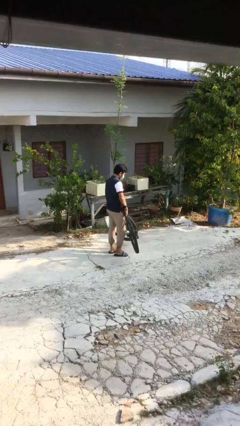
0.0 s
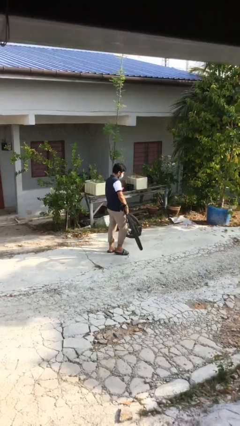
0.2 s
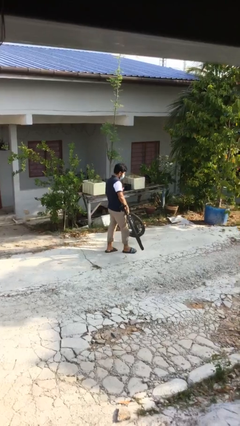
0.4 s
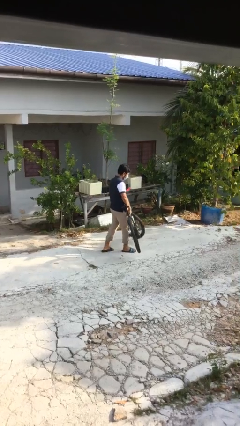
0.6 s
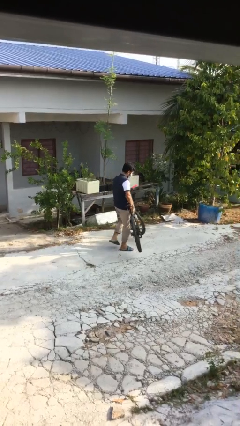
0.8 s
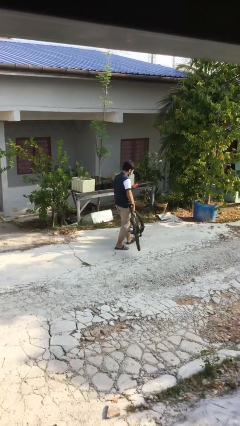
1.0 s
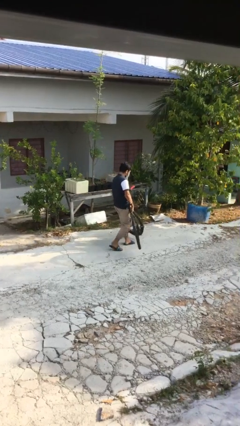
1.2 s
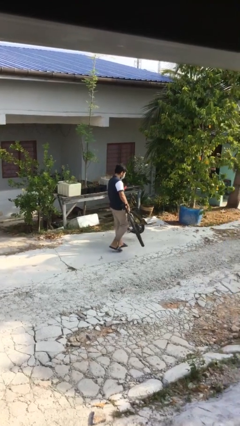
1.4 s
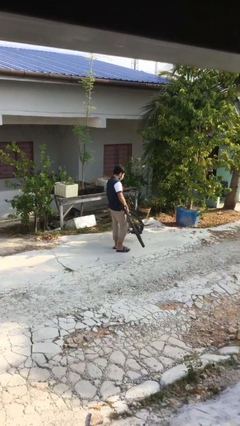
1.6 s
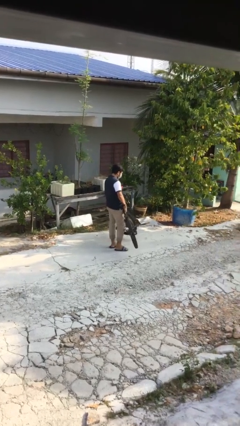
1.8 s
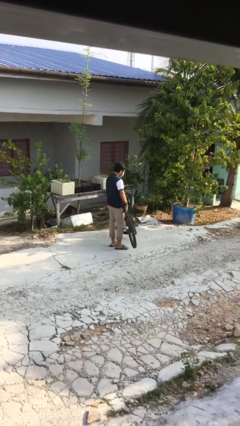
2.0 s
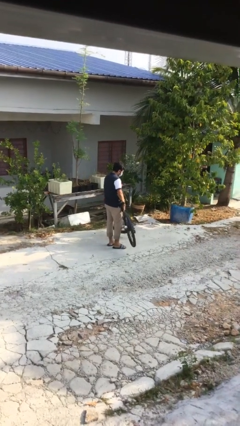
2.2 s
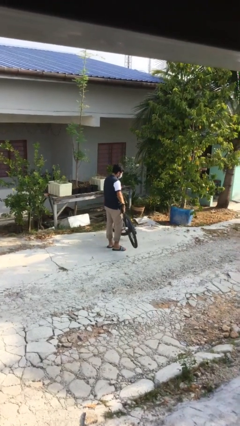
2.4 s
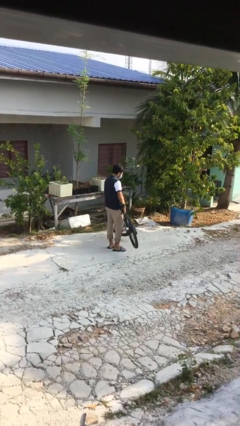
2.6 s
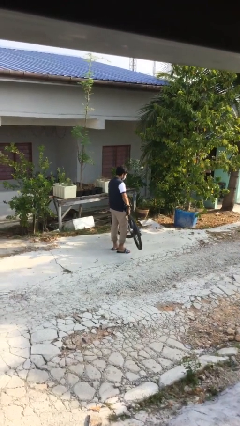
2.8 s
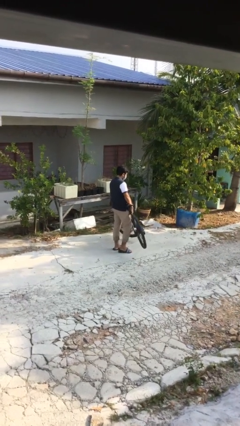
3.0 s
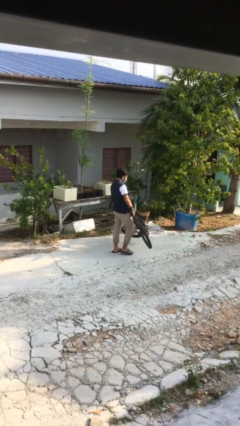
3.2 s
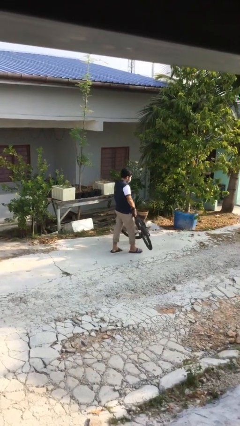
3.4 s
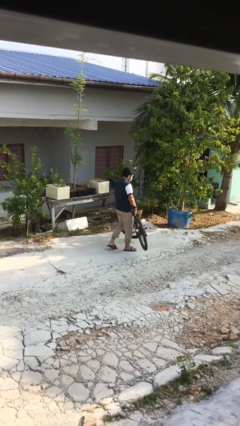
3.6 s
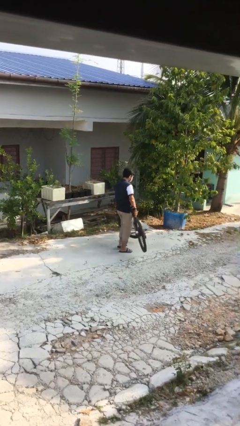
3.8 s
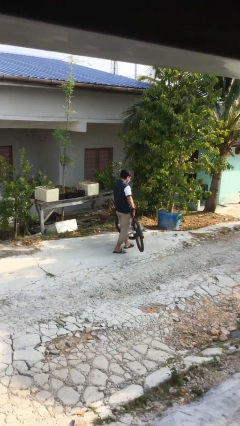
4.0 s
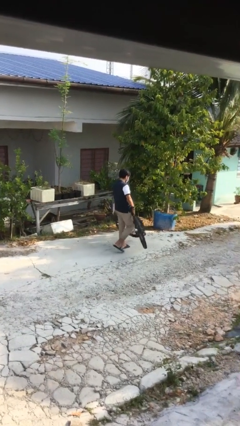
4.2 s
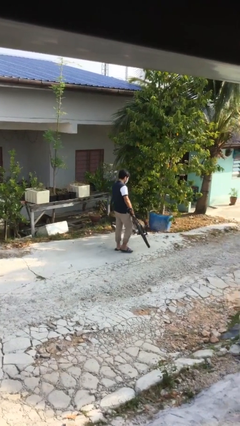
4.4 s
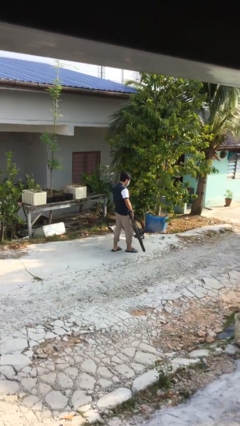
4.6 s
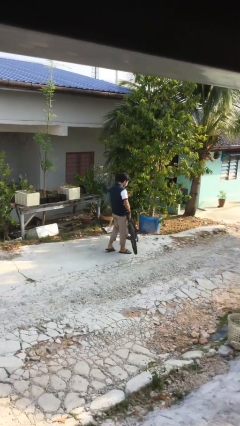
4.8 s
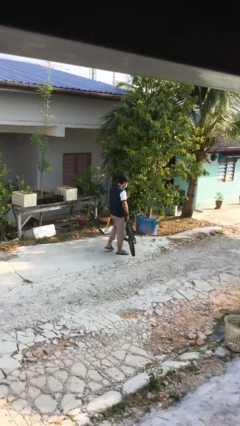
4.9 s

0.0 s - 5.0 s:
person carries bicycle

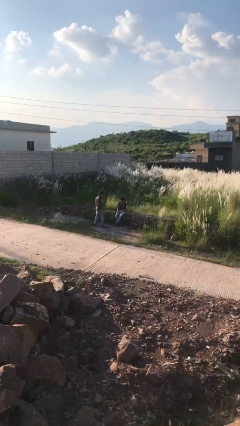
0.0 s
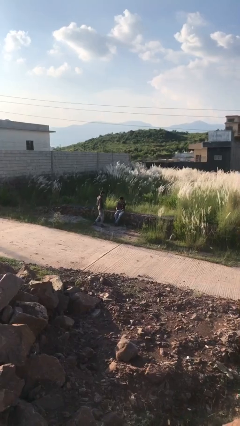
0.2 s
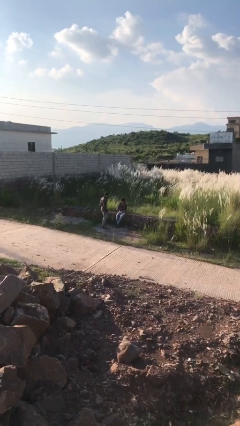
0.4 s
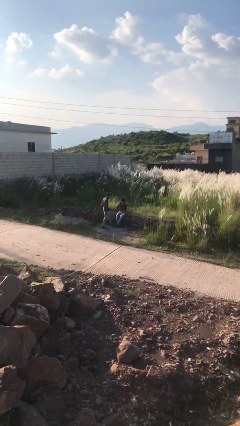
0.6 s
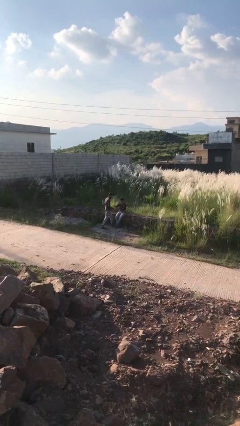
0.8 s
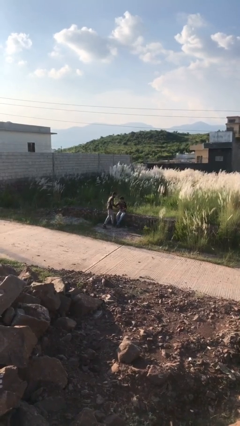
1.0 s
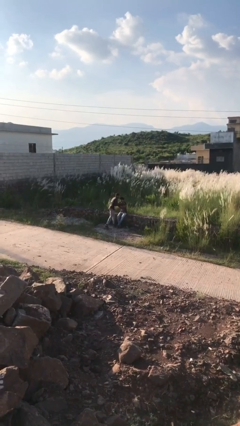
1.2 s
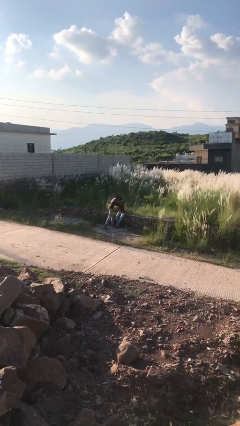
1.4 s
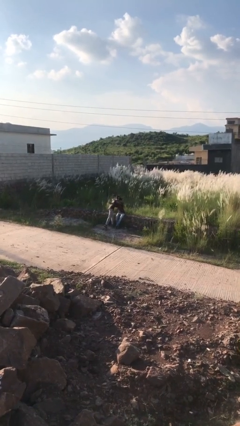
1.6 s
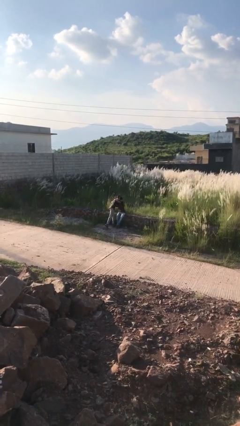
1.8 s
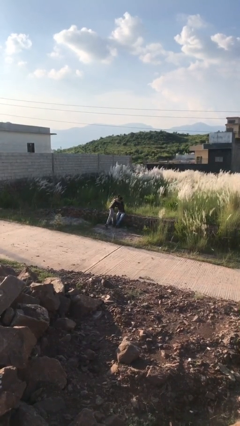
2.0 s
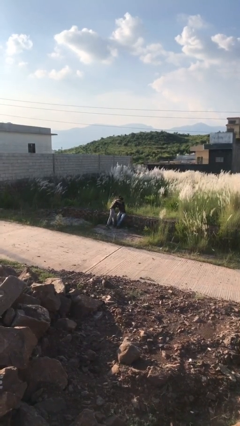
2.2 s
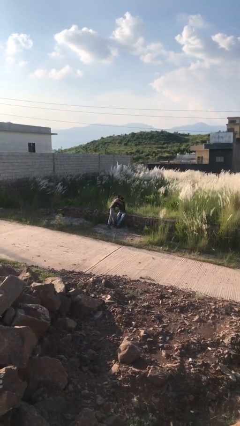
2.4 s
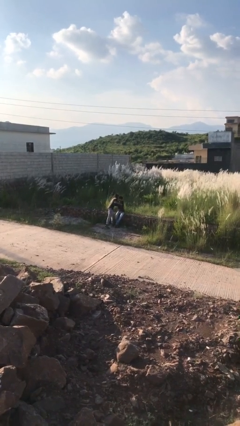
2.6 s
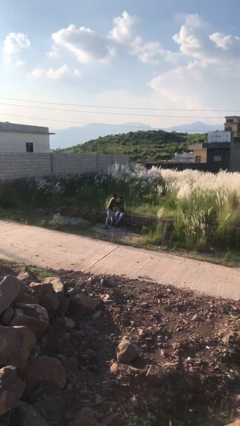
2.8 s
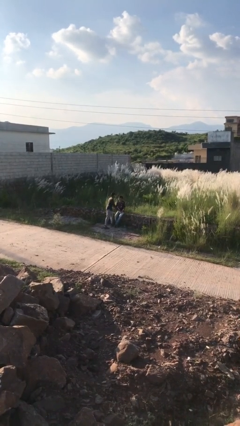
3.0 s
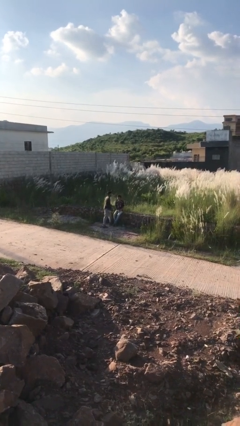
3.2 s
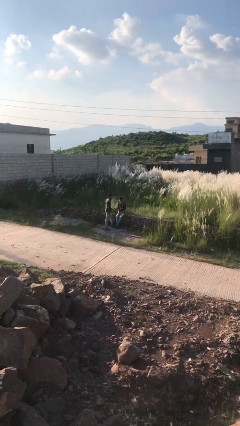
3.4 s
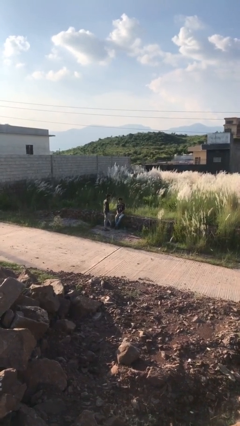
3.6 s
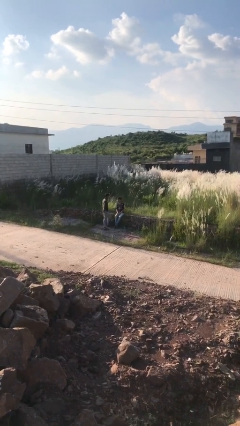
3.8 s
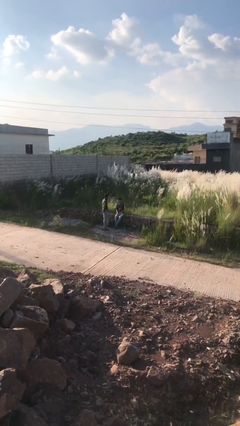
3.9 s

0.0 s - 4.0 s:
person embraces person

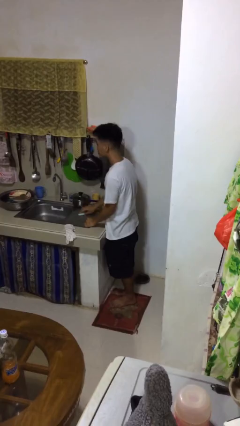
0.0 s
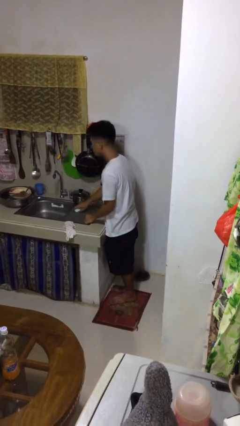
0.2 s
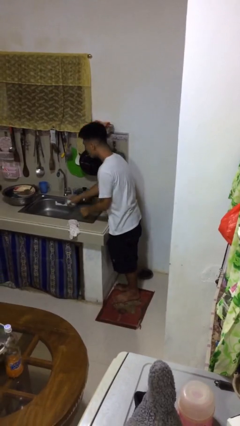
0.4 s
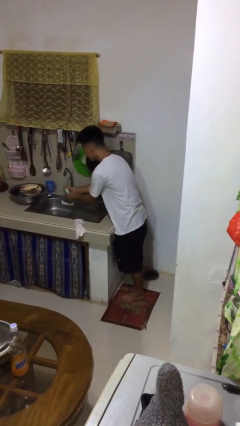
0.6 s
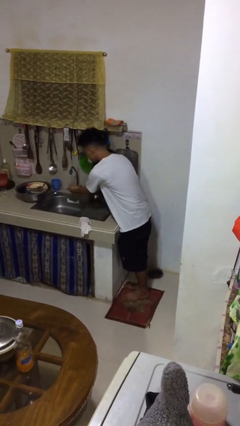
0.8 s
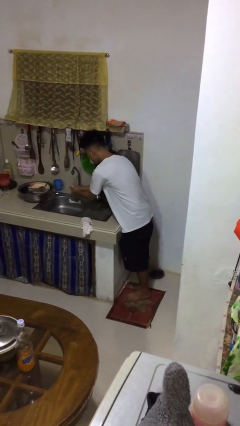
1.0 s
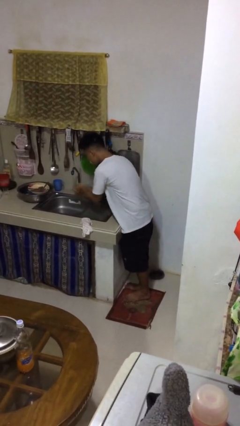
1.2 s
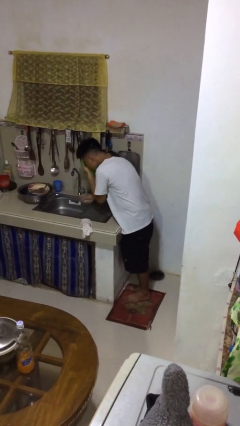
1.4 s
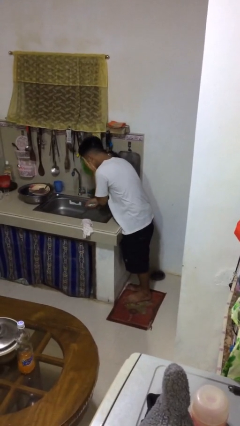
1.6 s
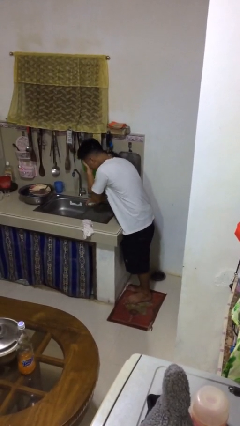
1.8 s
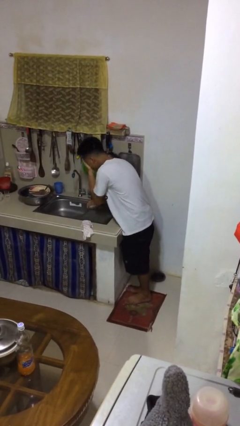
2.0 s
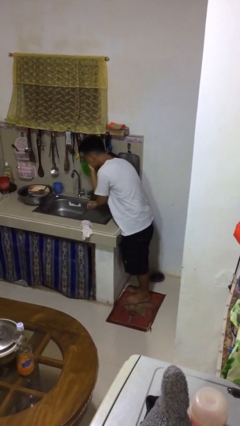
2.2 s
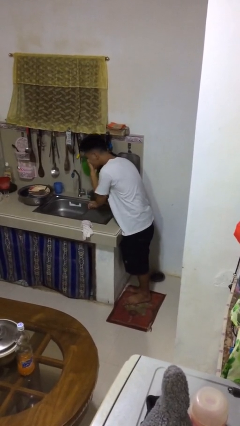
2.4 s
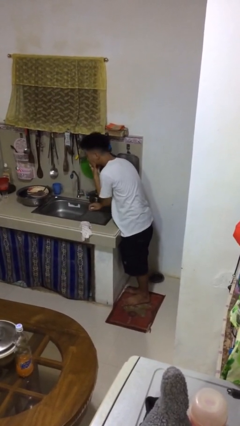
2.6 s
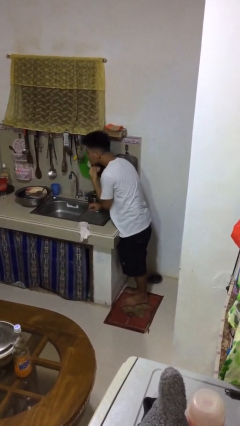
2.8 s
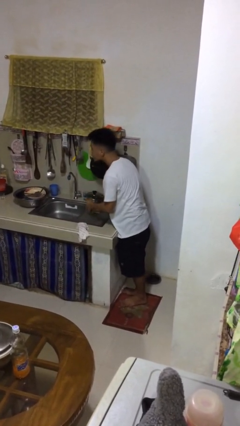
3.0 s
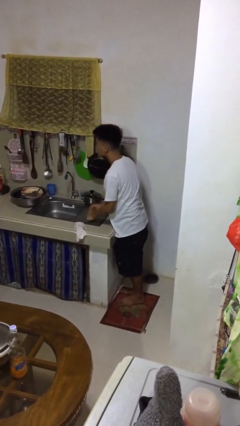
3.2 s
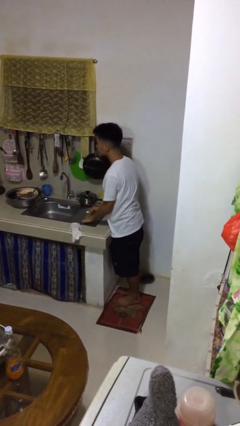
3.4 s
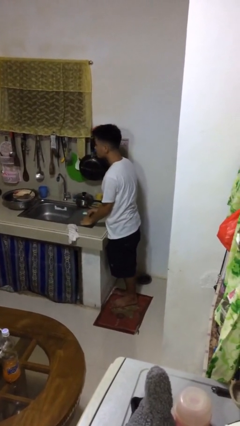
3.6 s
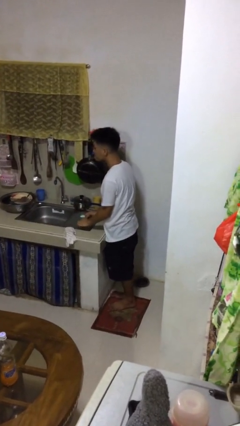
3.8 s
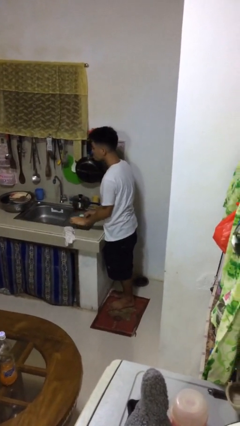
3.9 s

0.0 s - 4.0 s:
person washes face

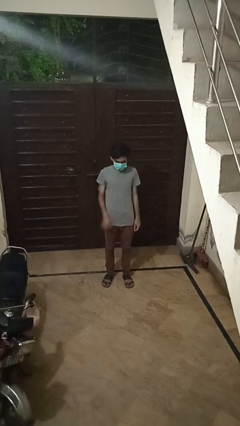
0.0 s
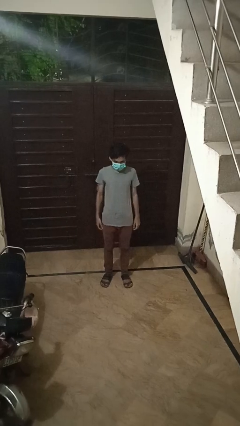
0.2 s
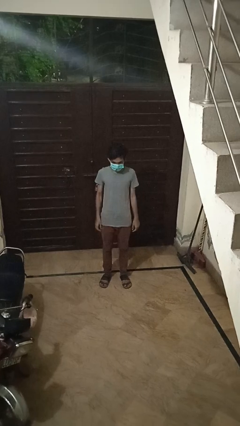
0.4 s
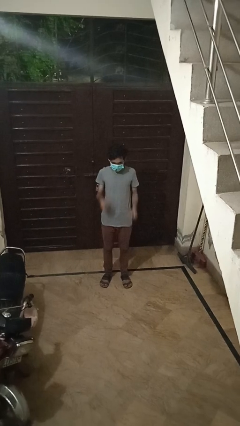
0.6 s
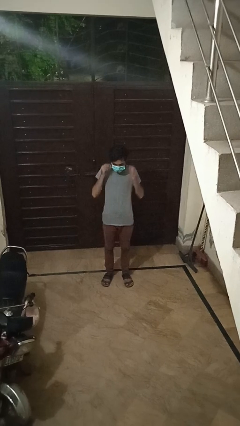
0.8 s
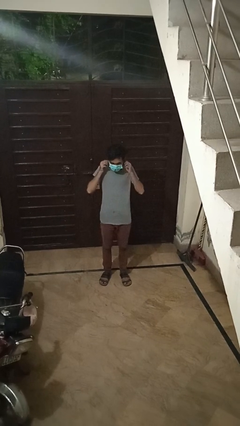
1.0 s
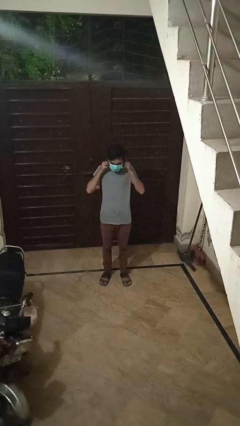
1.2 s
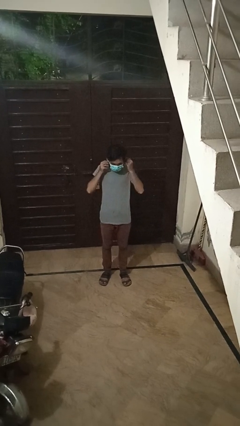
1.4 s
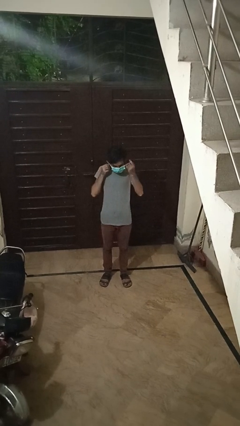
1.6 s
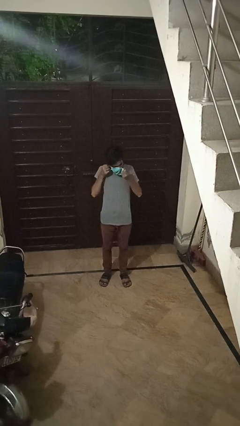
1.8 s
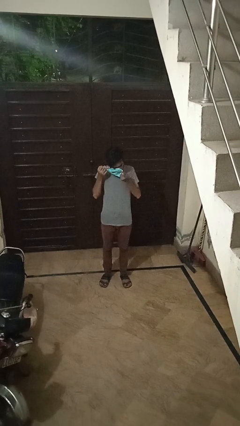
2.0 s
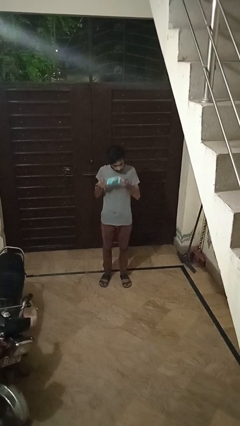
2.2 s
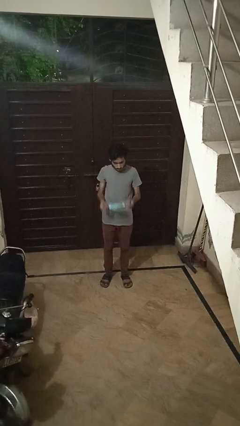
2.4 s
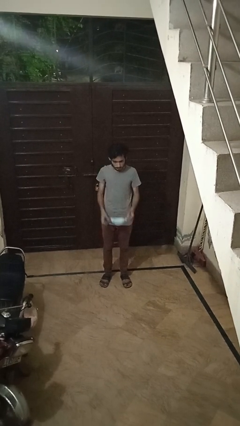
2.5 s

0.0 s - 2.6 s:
person takes off facemask

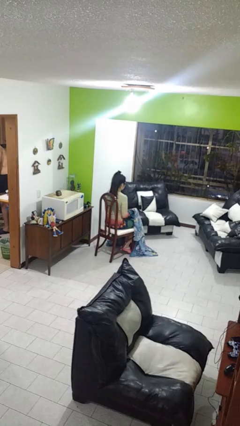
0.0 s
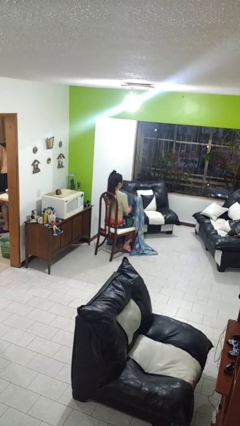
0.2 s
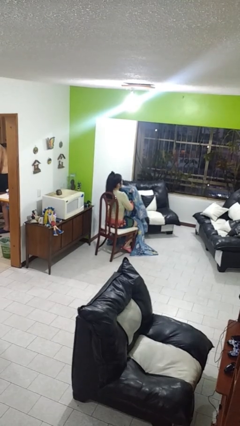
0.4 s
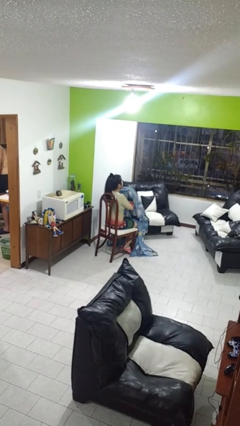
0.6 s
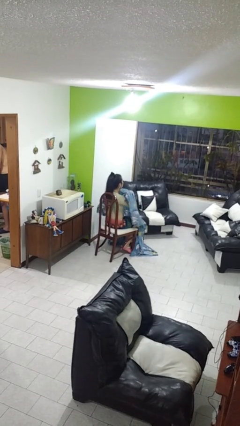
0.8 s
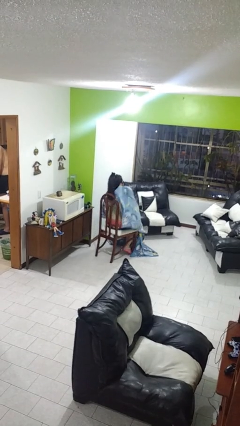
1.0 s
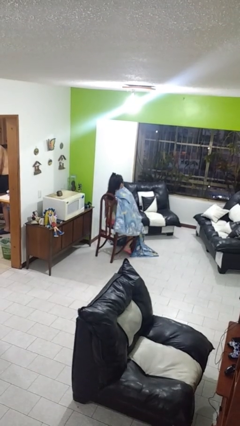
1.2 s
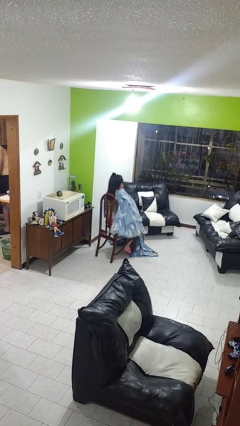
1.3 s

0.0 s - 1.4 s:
person covers with blanket

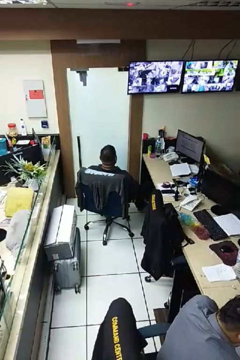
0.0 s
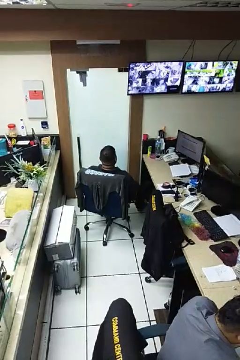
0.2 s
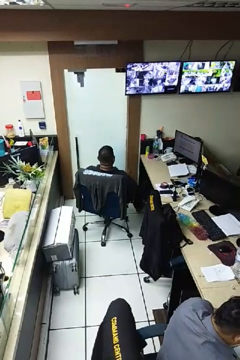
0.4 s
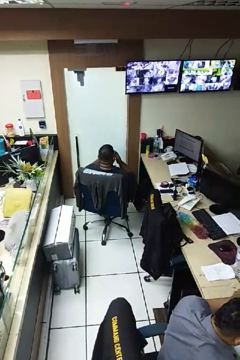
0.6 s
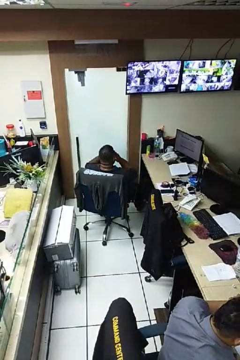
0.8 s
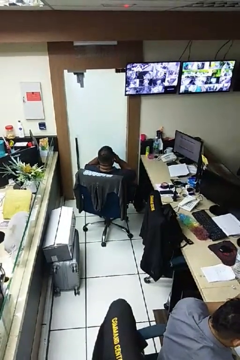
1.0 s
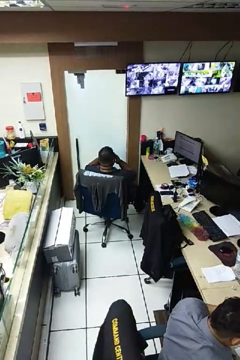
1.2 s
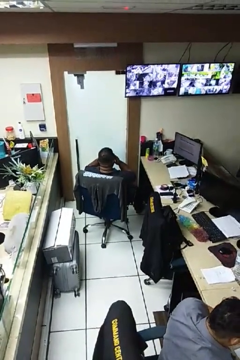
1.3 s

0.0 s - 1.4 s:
person covers face with hands
